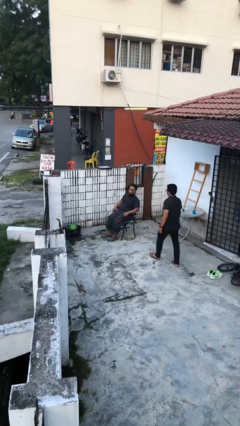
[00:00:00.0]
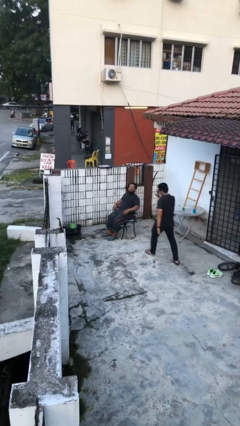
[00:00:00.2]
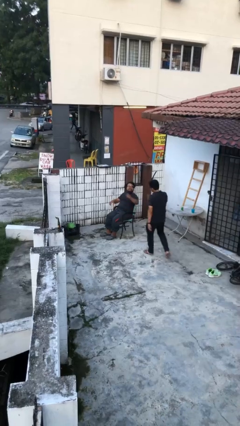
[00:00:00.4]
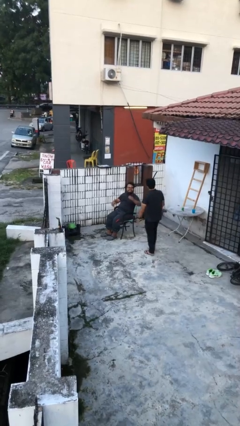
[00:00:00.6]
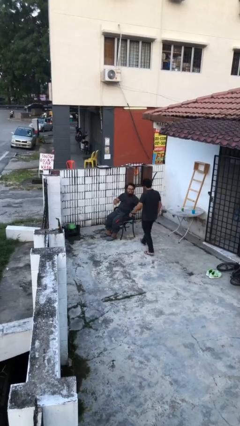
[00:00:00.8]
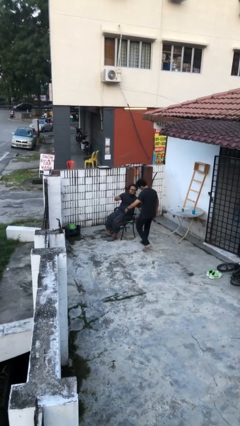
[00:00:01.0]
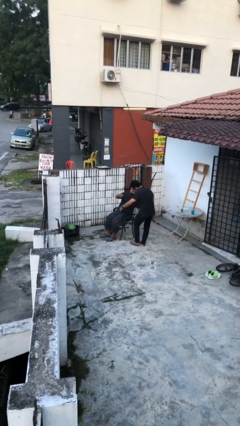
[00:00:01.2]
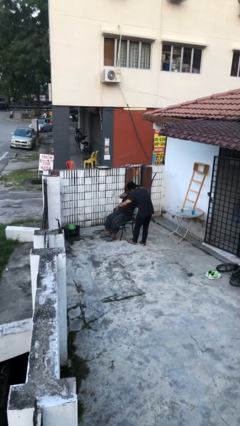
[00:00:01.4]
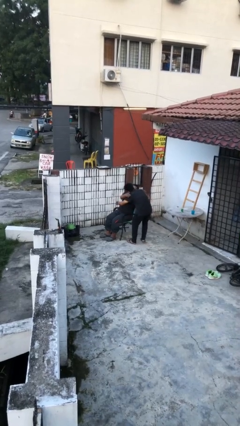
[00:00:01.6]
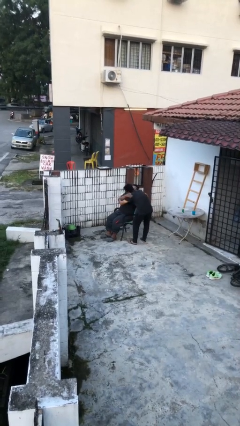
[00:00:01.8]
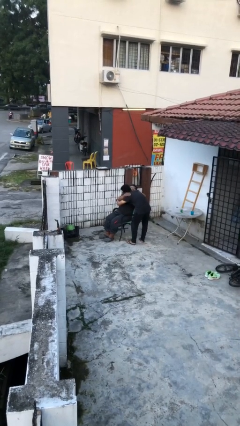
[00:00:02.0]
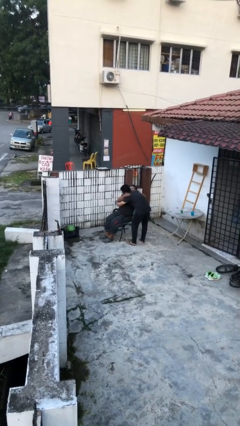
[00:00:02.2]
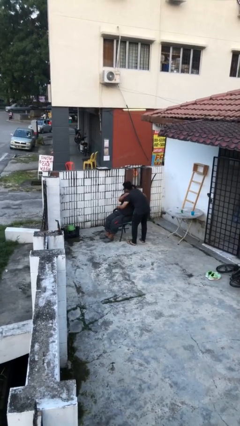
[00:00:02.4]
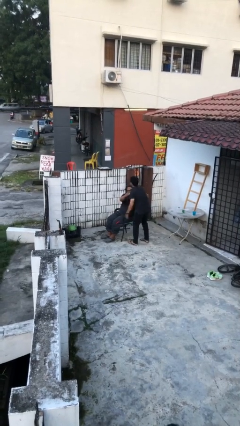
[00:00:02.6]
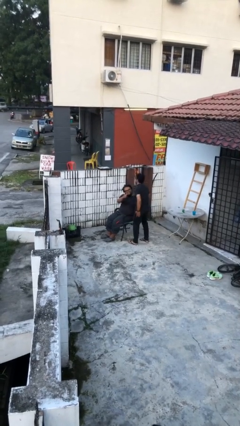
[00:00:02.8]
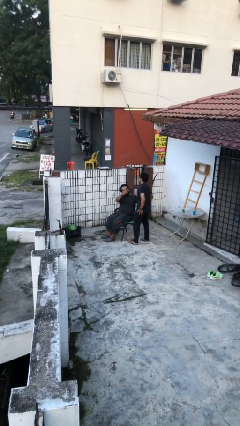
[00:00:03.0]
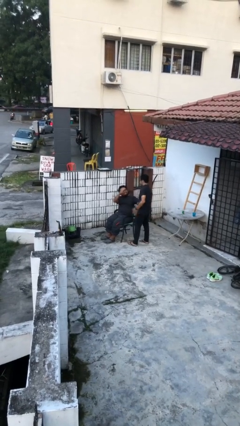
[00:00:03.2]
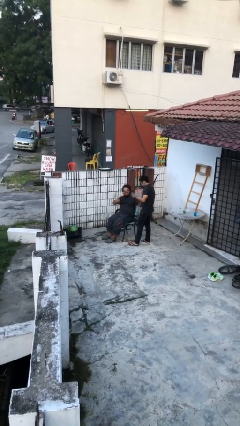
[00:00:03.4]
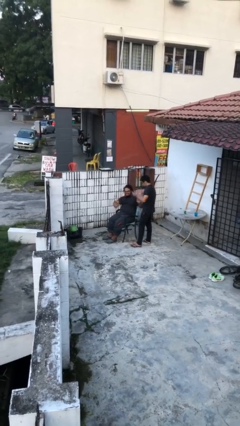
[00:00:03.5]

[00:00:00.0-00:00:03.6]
person embraces person

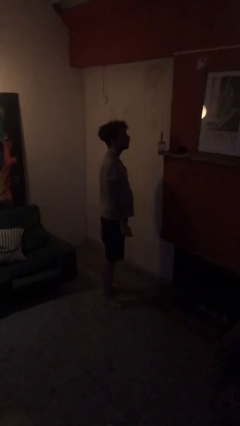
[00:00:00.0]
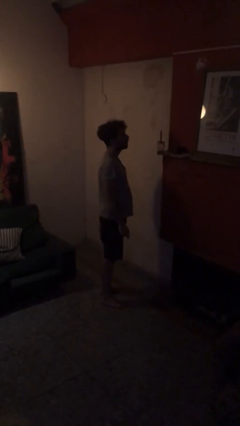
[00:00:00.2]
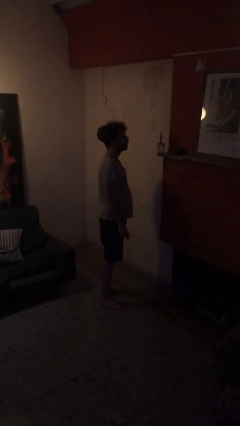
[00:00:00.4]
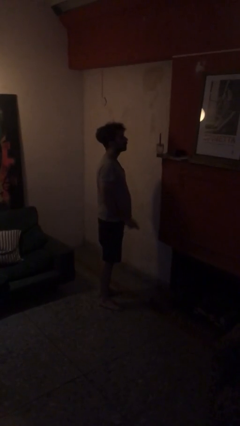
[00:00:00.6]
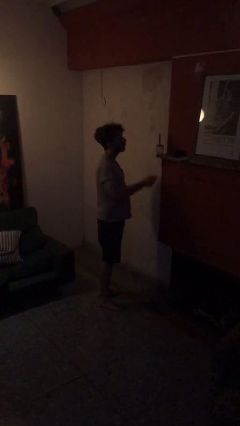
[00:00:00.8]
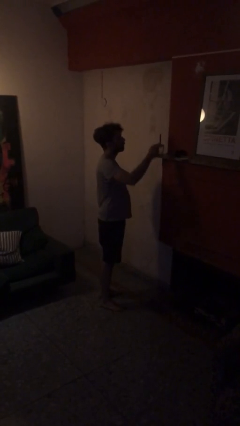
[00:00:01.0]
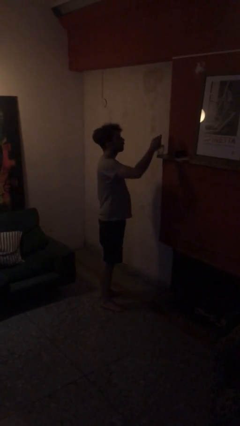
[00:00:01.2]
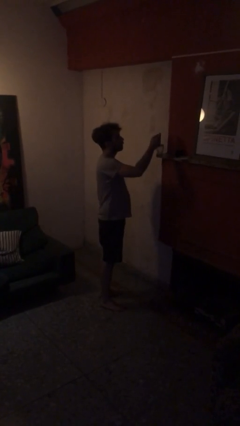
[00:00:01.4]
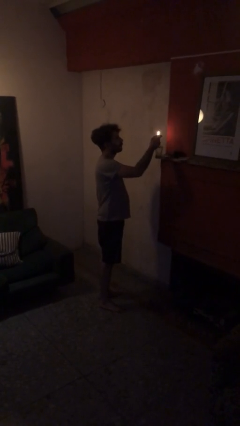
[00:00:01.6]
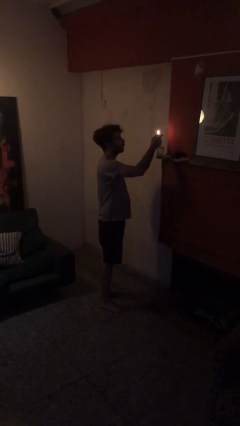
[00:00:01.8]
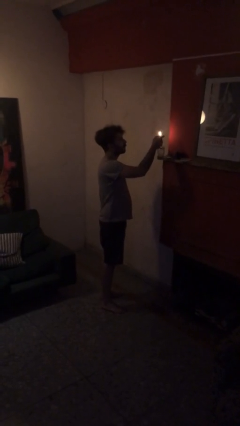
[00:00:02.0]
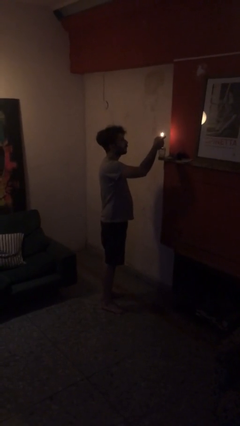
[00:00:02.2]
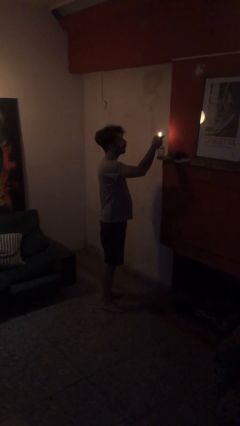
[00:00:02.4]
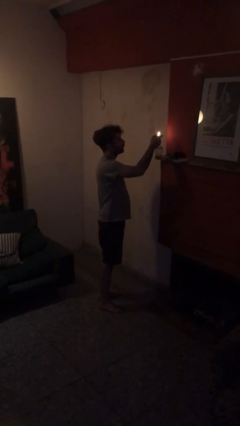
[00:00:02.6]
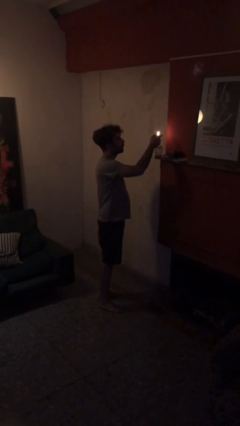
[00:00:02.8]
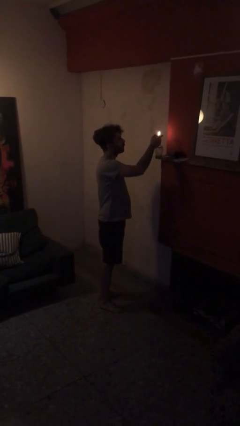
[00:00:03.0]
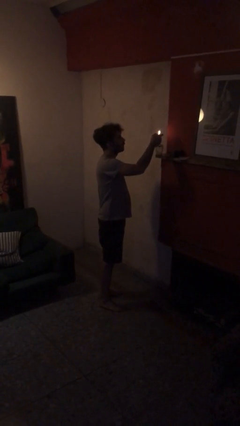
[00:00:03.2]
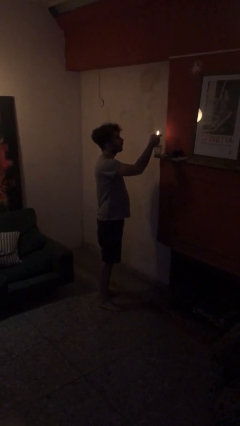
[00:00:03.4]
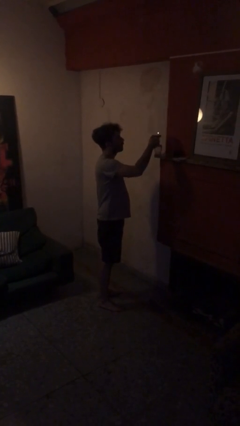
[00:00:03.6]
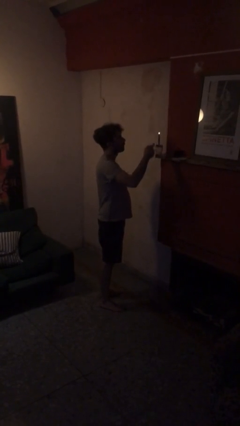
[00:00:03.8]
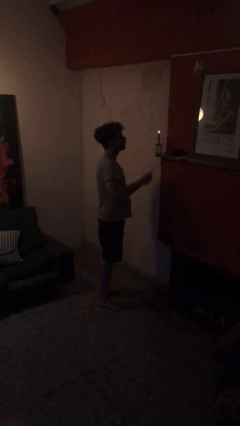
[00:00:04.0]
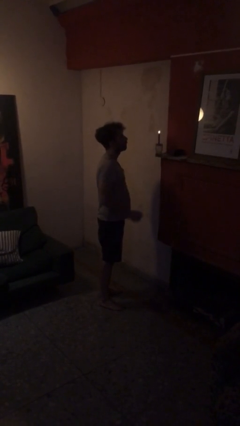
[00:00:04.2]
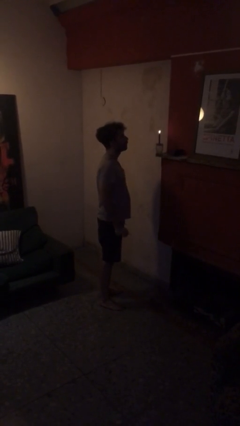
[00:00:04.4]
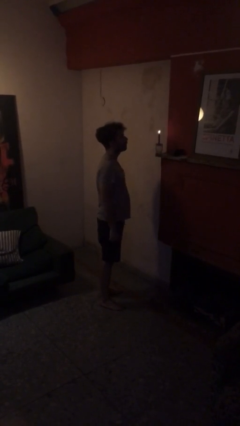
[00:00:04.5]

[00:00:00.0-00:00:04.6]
person lights candle

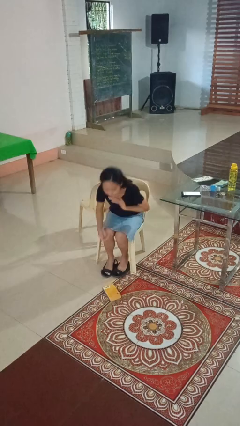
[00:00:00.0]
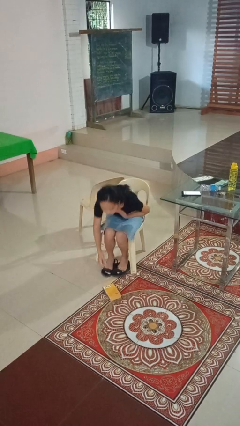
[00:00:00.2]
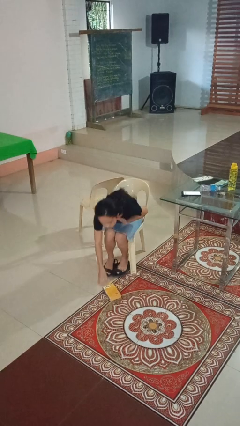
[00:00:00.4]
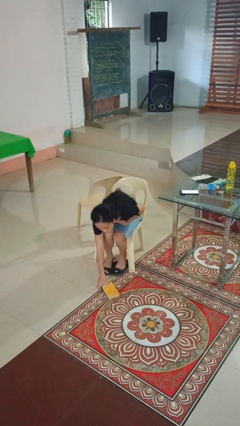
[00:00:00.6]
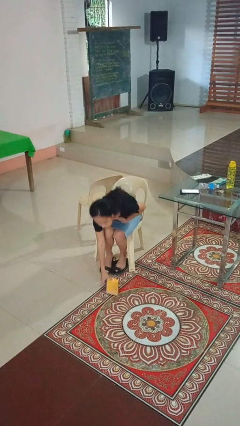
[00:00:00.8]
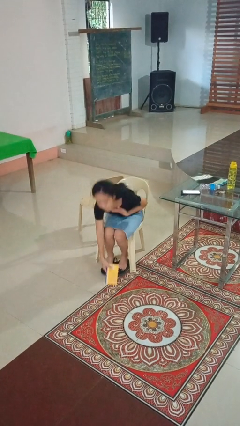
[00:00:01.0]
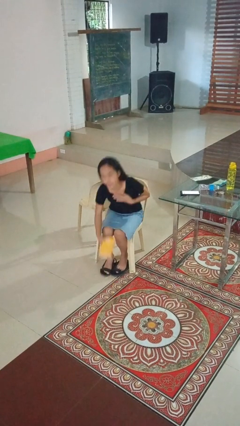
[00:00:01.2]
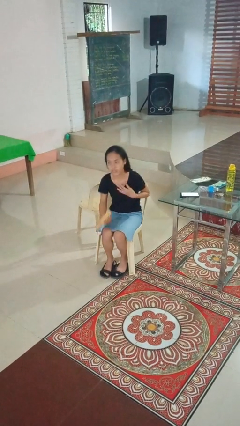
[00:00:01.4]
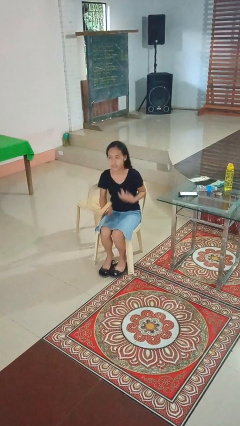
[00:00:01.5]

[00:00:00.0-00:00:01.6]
person picks up object from floor

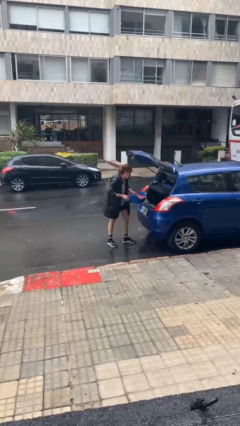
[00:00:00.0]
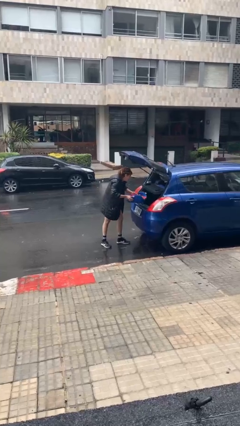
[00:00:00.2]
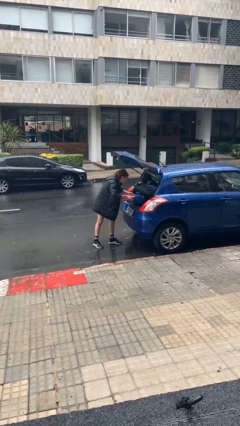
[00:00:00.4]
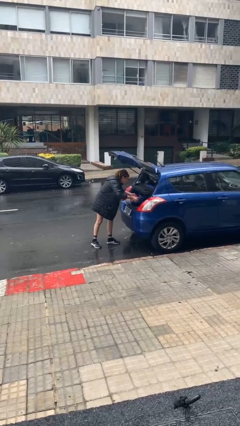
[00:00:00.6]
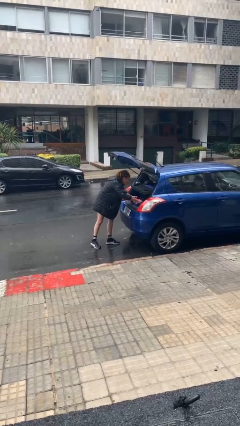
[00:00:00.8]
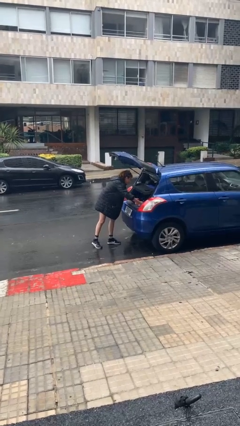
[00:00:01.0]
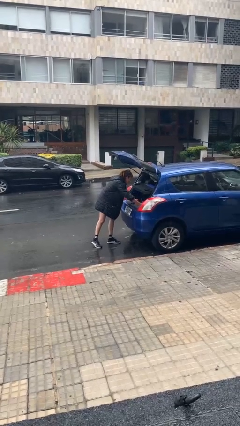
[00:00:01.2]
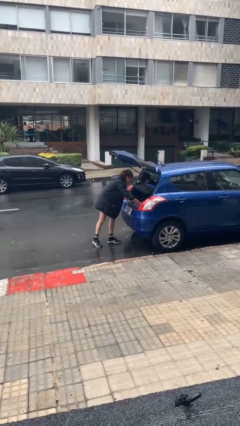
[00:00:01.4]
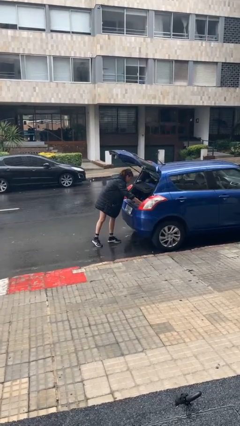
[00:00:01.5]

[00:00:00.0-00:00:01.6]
person loads car

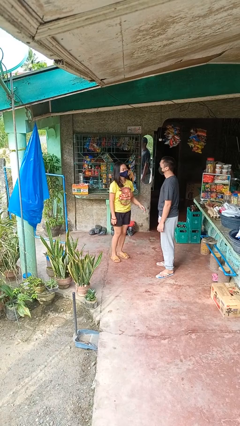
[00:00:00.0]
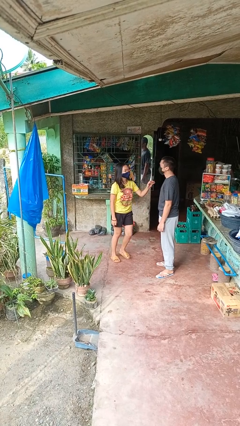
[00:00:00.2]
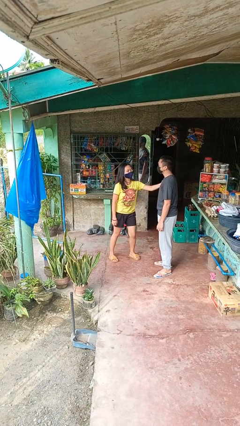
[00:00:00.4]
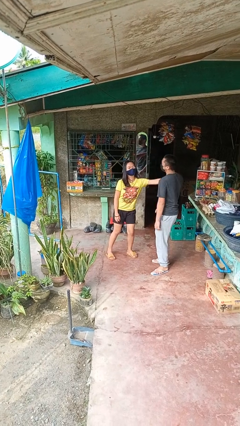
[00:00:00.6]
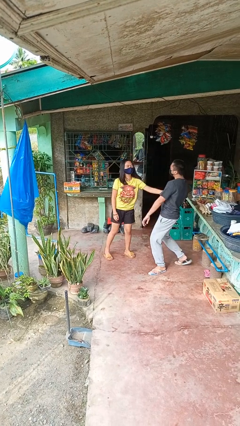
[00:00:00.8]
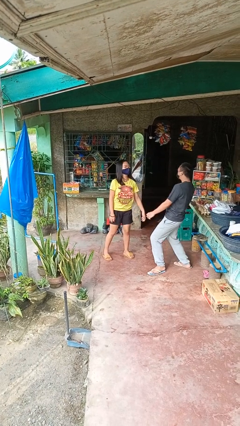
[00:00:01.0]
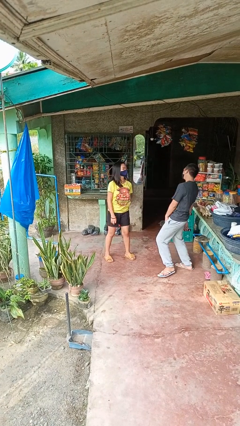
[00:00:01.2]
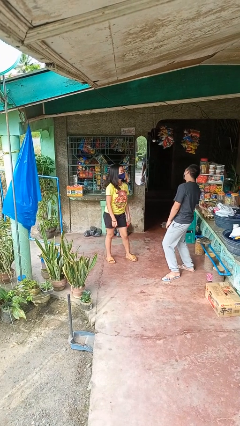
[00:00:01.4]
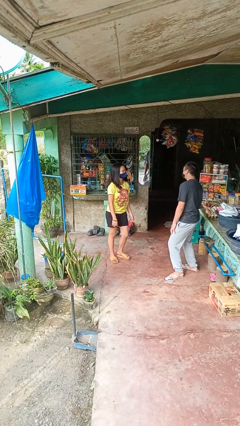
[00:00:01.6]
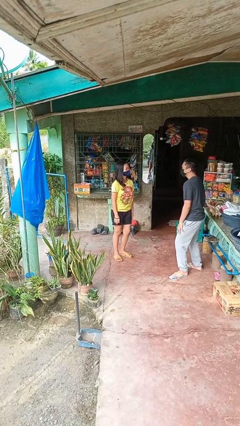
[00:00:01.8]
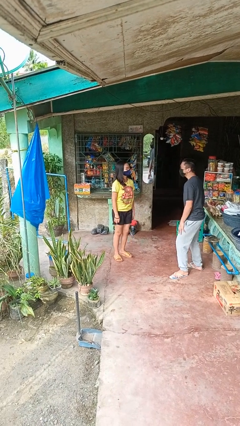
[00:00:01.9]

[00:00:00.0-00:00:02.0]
person shoves person

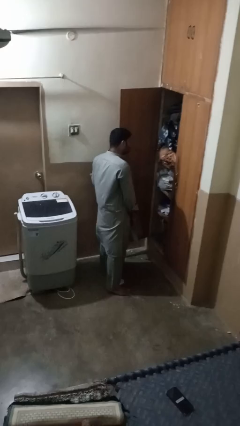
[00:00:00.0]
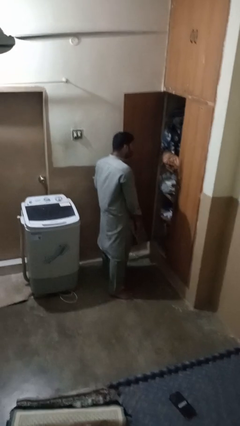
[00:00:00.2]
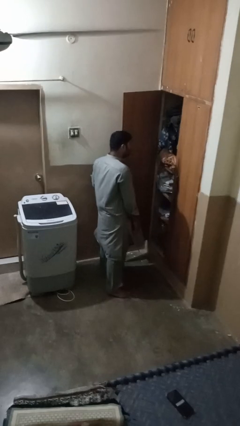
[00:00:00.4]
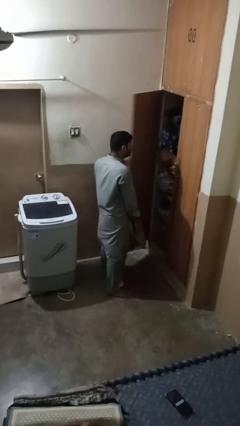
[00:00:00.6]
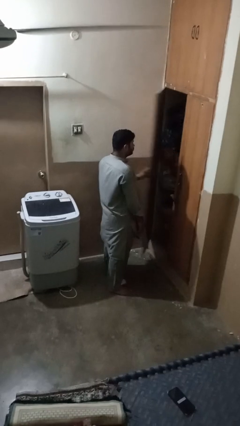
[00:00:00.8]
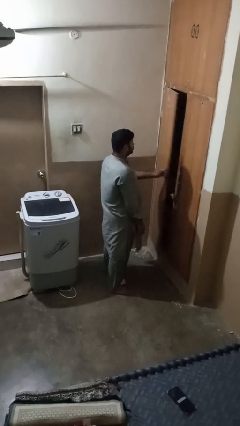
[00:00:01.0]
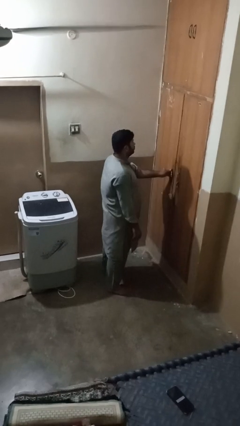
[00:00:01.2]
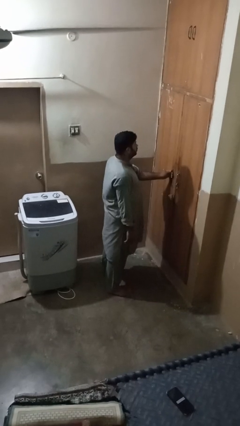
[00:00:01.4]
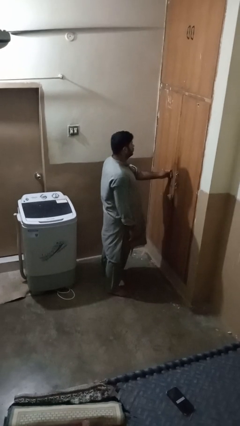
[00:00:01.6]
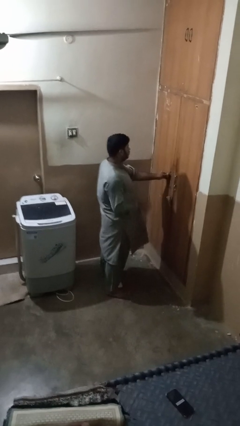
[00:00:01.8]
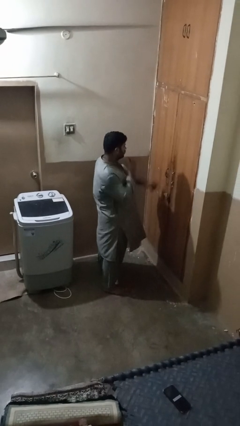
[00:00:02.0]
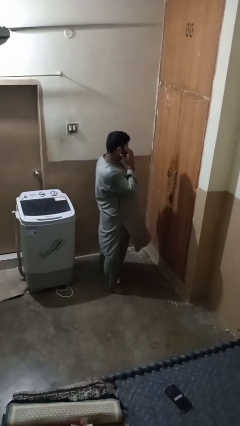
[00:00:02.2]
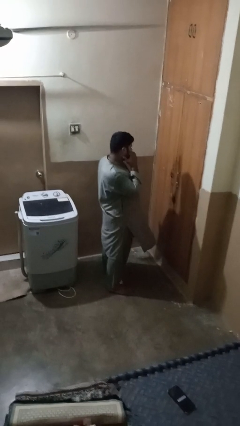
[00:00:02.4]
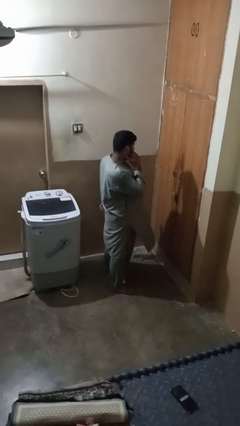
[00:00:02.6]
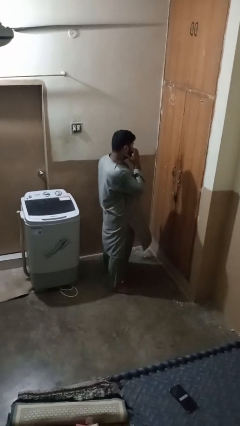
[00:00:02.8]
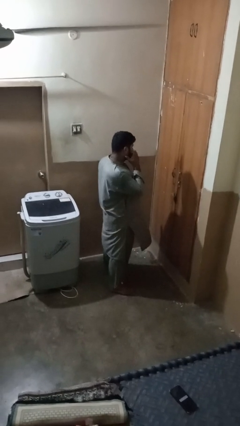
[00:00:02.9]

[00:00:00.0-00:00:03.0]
person closes closet door

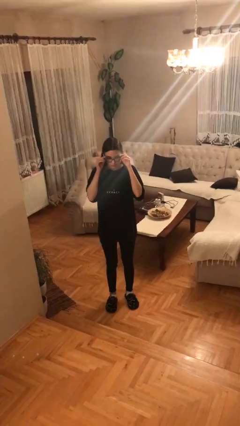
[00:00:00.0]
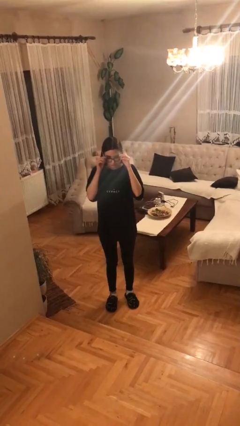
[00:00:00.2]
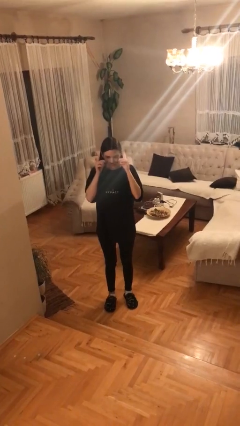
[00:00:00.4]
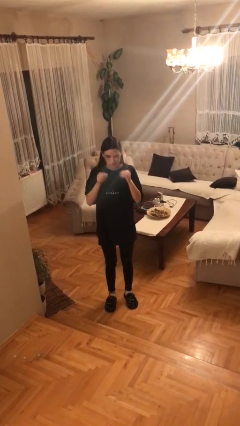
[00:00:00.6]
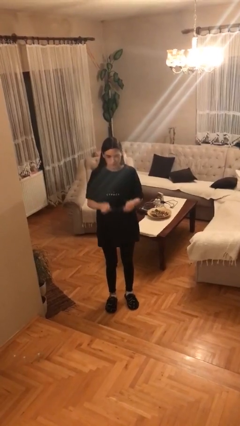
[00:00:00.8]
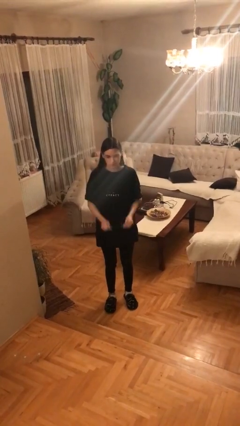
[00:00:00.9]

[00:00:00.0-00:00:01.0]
person takes off glasses
